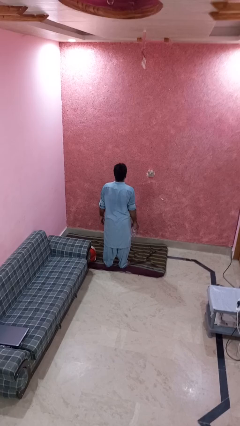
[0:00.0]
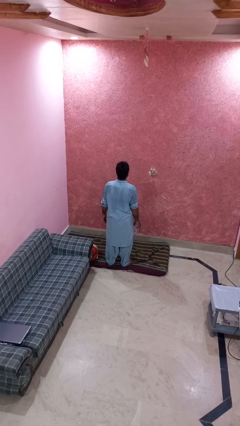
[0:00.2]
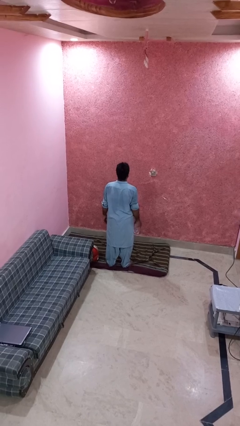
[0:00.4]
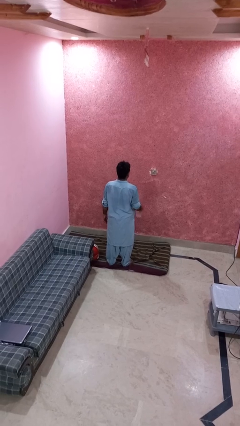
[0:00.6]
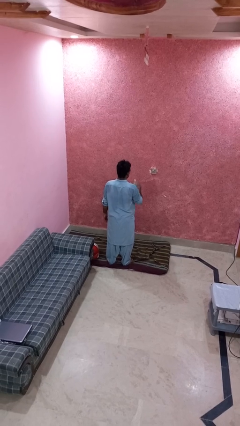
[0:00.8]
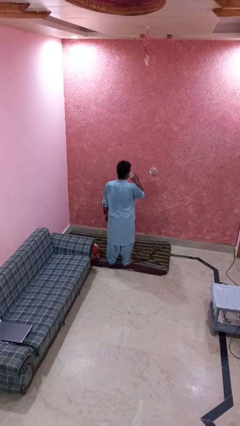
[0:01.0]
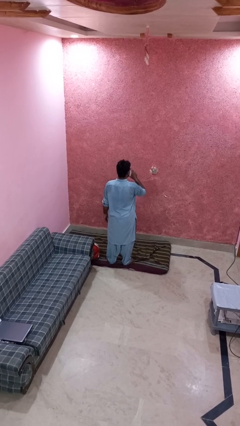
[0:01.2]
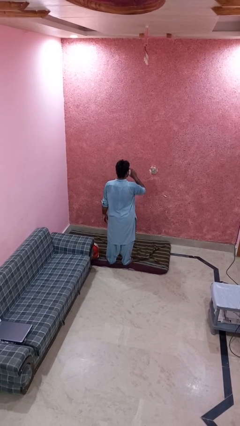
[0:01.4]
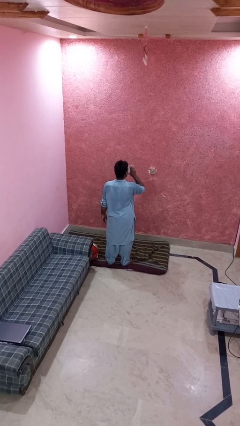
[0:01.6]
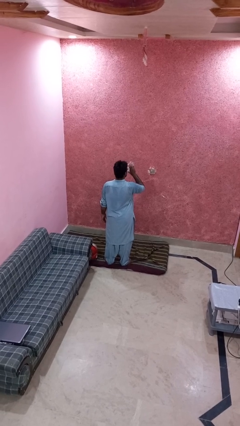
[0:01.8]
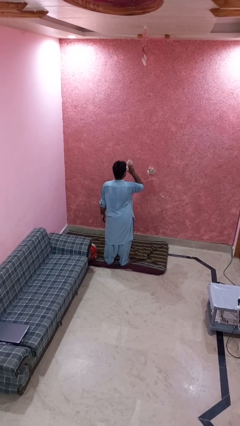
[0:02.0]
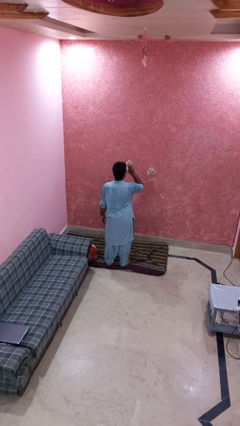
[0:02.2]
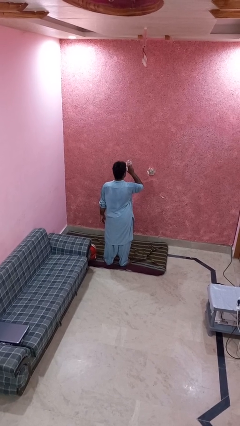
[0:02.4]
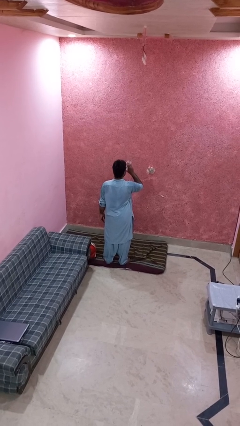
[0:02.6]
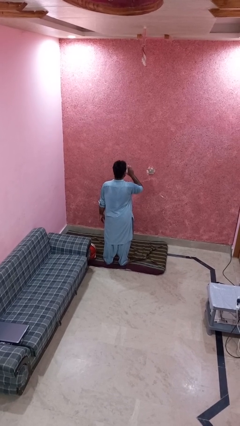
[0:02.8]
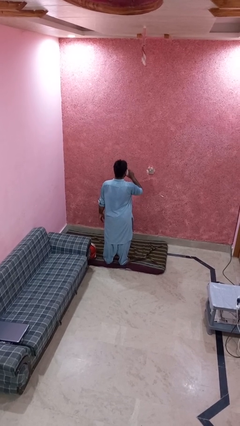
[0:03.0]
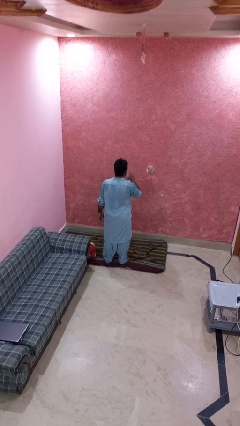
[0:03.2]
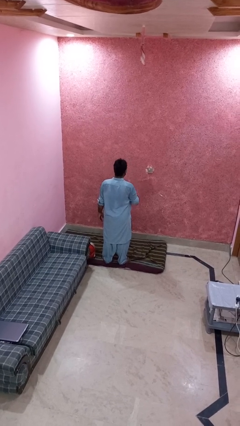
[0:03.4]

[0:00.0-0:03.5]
person drinks from bottle

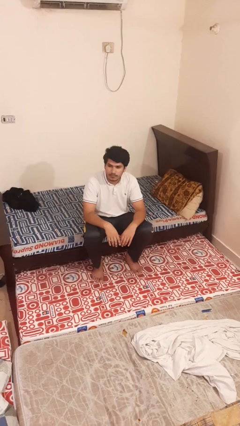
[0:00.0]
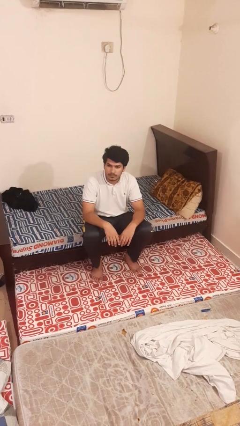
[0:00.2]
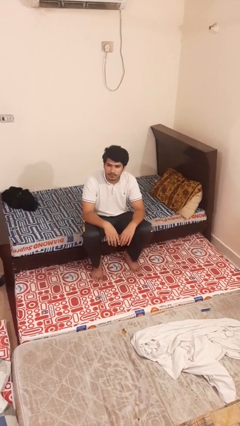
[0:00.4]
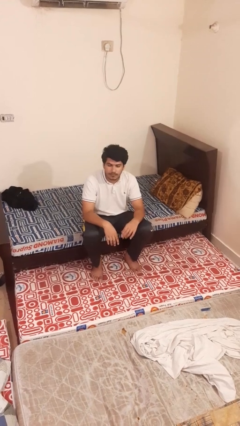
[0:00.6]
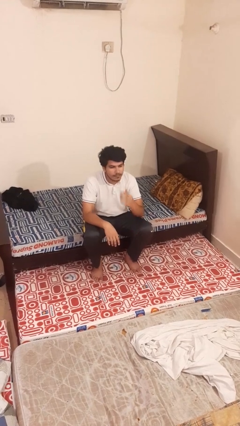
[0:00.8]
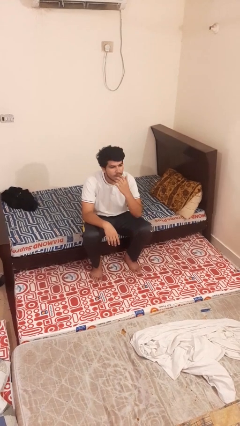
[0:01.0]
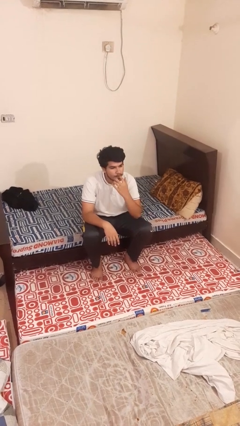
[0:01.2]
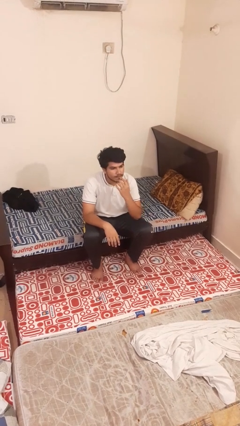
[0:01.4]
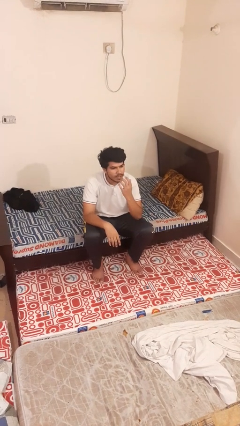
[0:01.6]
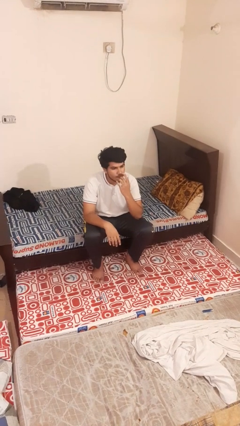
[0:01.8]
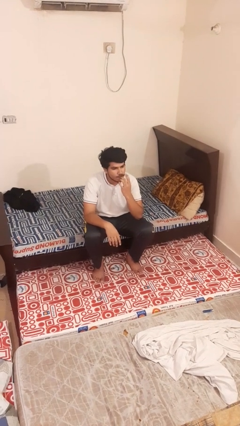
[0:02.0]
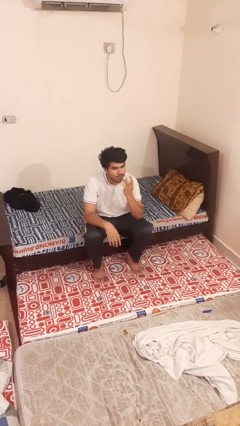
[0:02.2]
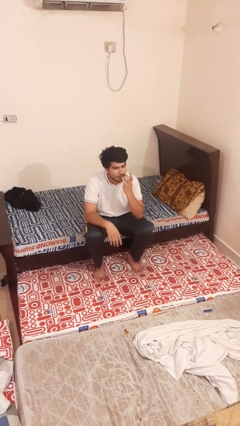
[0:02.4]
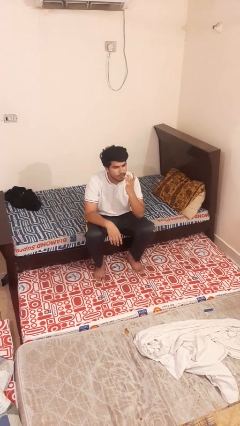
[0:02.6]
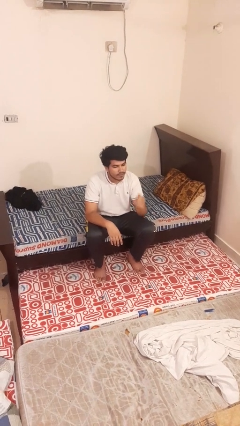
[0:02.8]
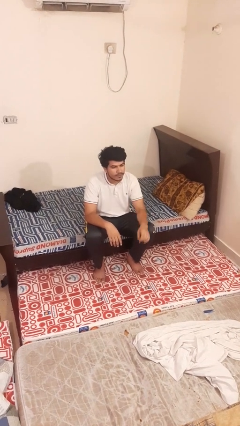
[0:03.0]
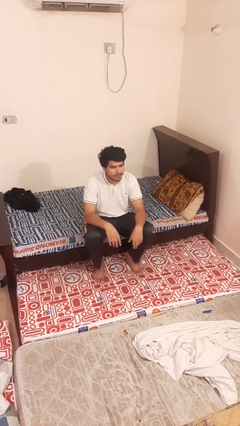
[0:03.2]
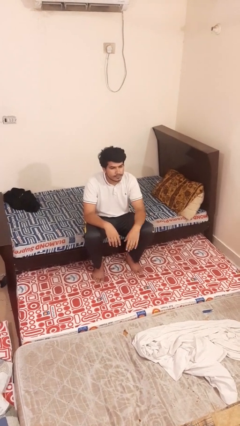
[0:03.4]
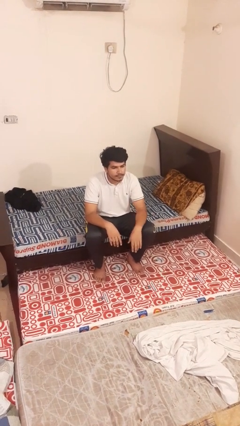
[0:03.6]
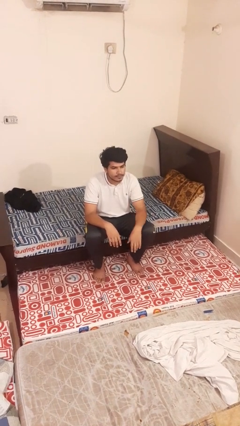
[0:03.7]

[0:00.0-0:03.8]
person licks fingers

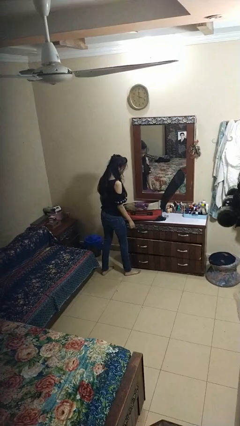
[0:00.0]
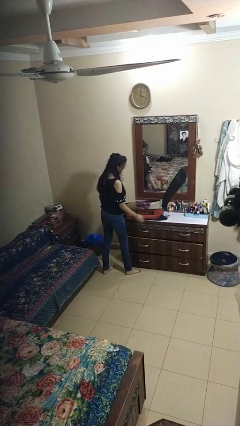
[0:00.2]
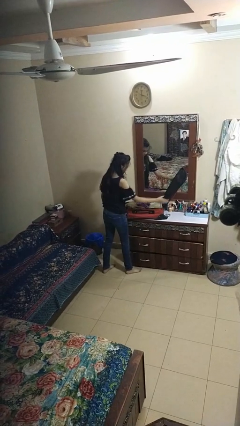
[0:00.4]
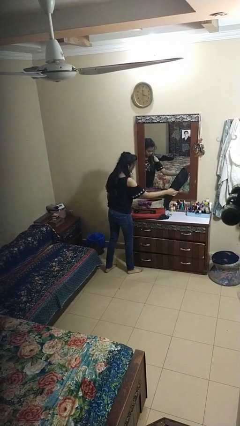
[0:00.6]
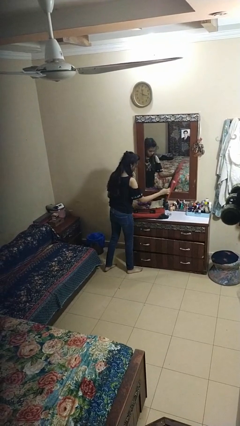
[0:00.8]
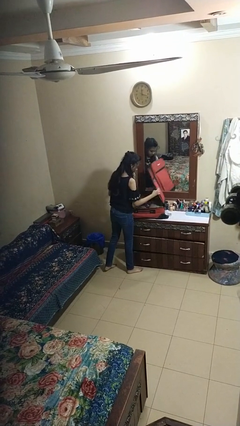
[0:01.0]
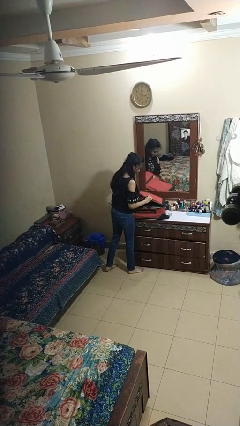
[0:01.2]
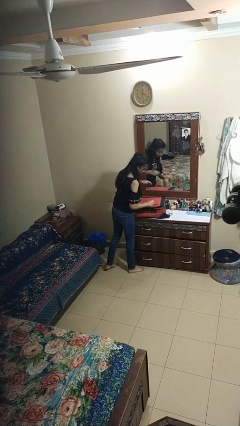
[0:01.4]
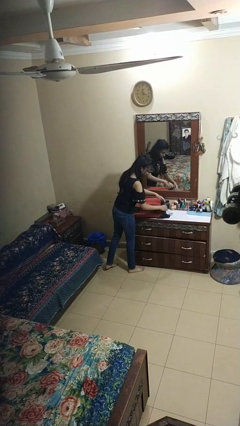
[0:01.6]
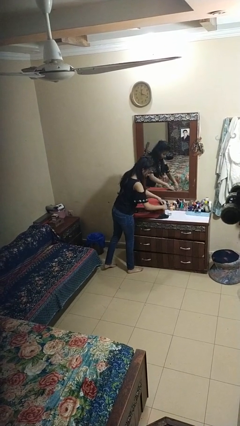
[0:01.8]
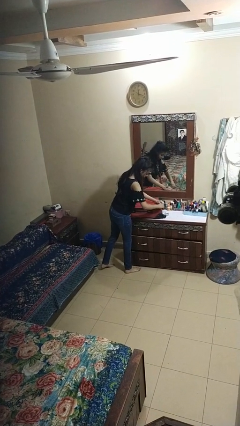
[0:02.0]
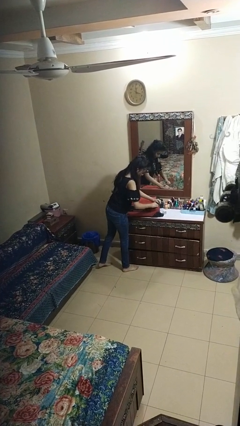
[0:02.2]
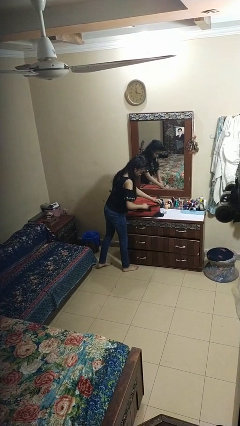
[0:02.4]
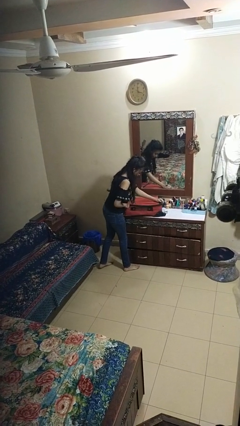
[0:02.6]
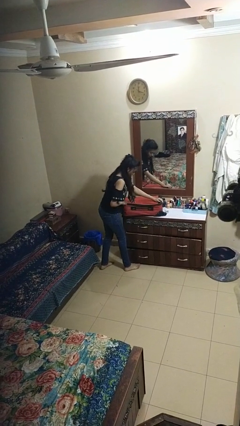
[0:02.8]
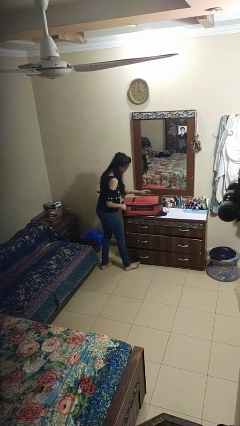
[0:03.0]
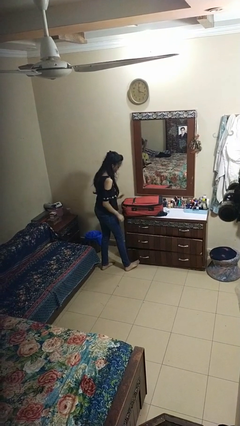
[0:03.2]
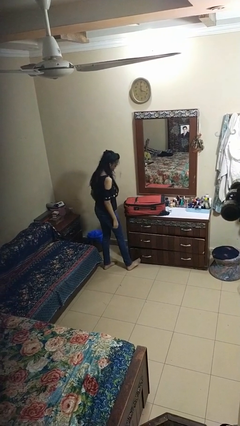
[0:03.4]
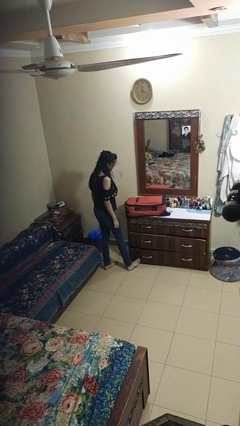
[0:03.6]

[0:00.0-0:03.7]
person closes suitcase

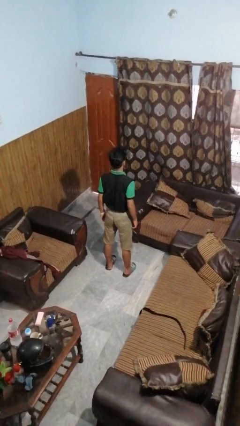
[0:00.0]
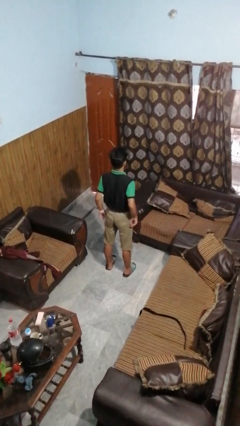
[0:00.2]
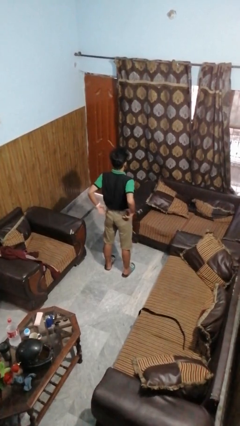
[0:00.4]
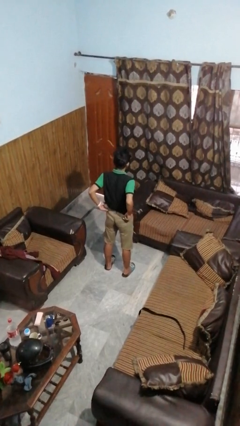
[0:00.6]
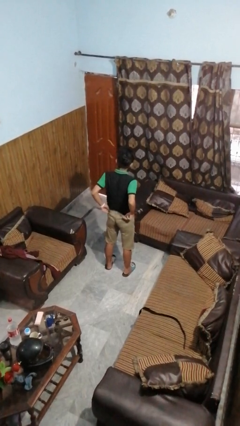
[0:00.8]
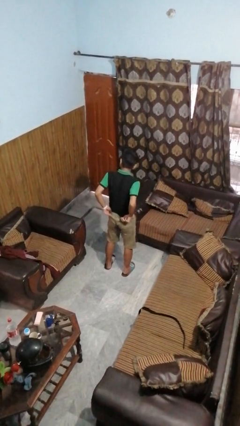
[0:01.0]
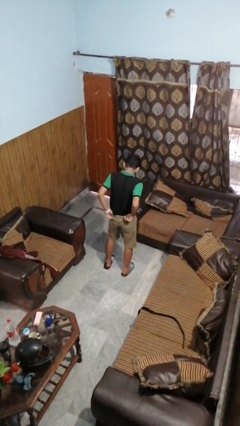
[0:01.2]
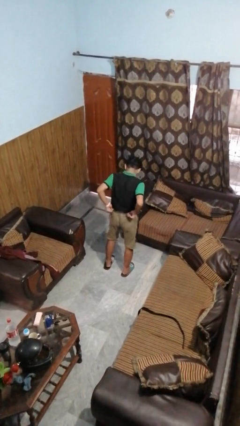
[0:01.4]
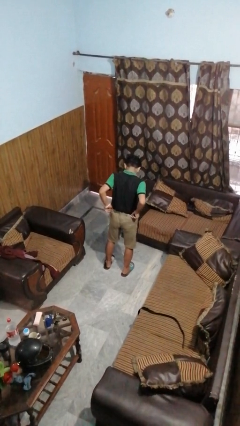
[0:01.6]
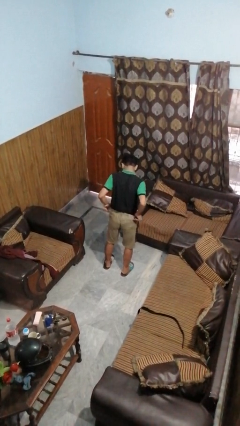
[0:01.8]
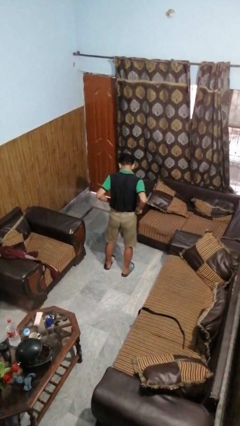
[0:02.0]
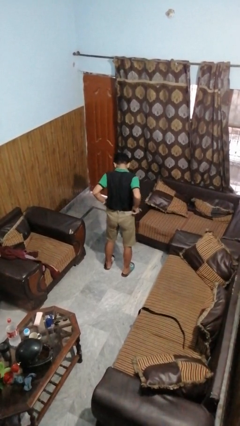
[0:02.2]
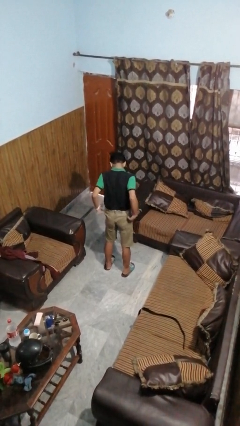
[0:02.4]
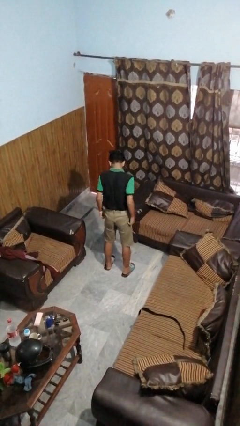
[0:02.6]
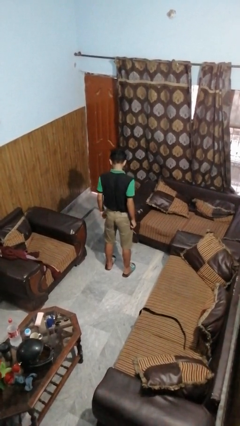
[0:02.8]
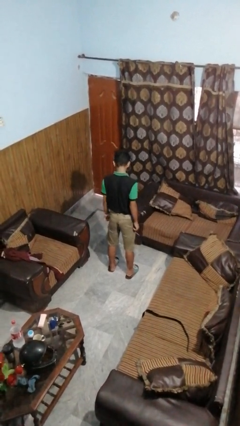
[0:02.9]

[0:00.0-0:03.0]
person hikes up pants

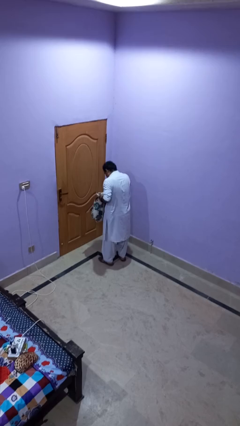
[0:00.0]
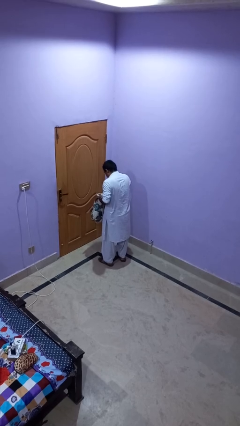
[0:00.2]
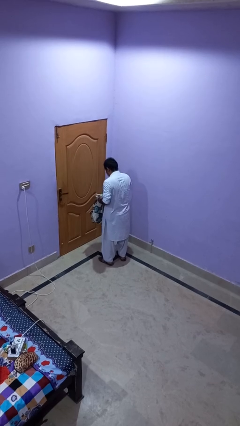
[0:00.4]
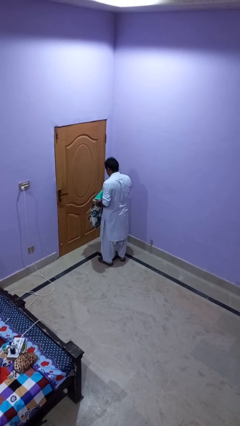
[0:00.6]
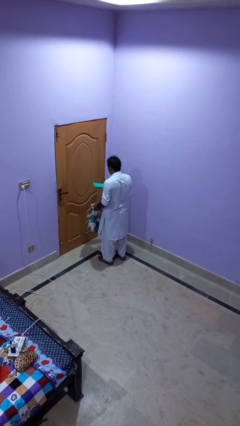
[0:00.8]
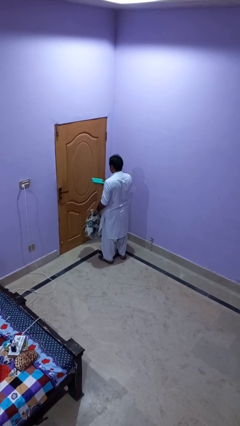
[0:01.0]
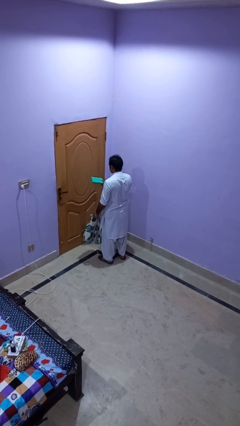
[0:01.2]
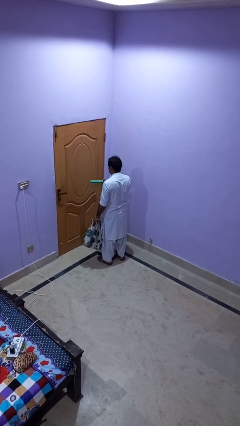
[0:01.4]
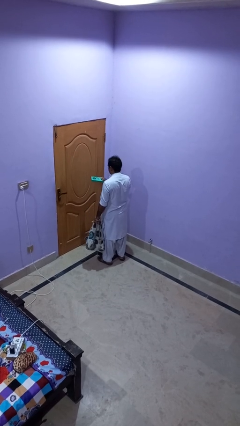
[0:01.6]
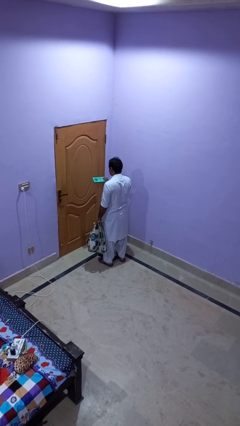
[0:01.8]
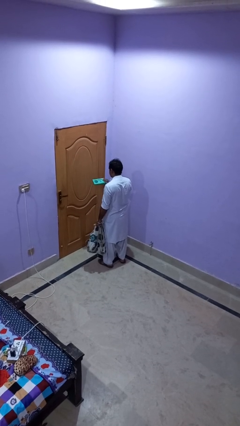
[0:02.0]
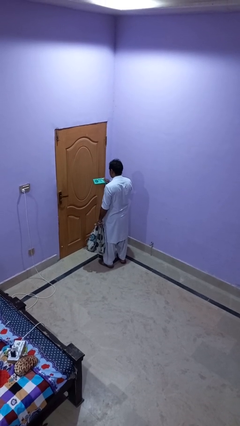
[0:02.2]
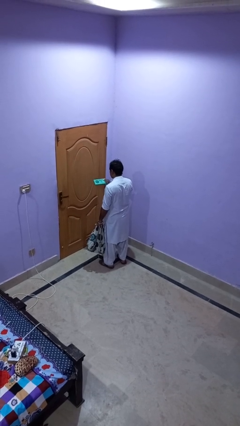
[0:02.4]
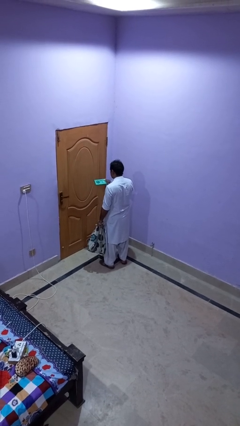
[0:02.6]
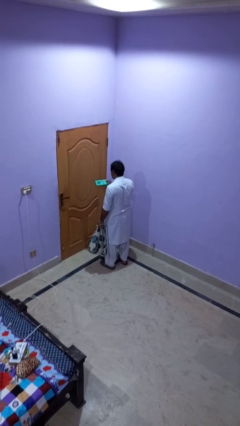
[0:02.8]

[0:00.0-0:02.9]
person takes object from backpack

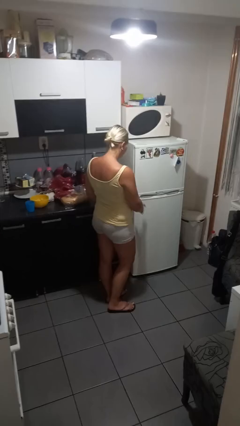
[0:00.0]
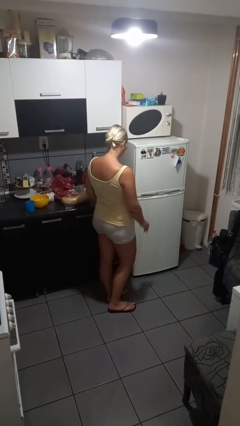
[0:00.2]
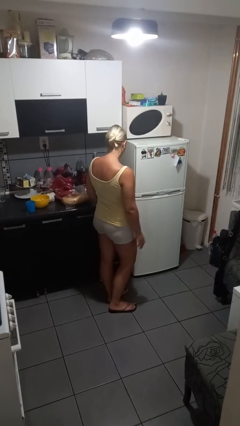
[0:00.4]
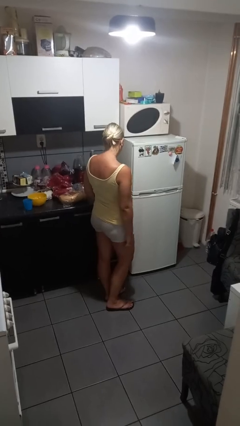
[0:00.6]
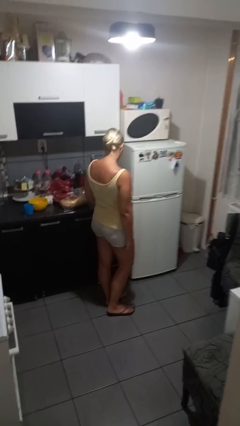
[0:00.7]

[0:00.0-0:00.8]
person closes refrigerator
